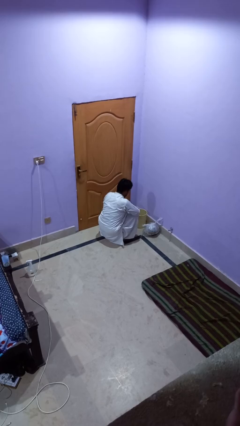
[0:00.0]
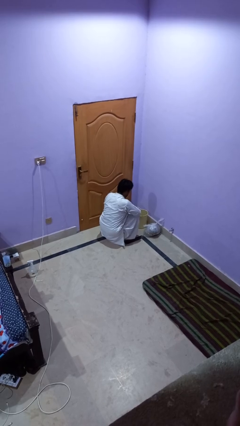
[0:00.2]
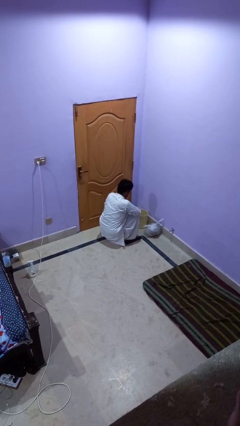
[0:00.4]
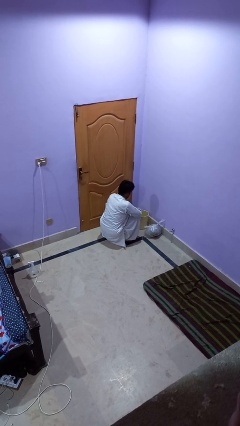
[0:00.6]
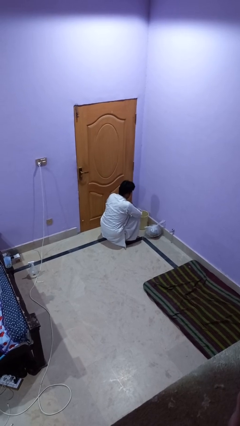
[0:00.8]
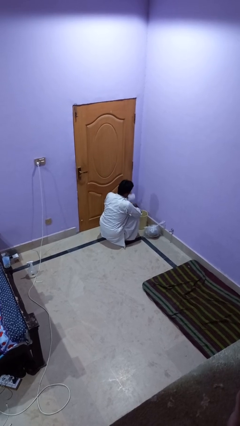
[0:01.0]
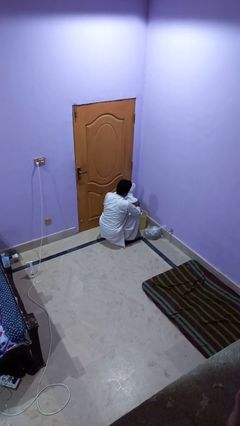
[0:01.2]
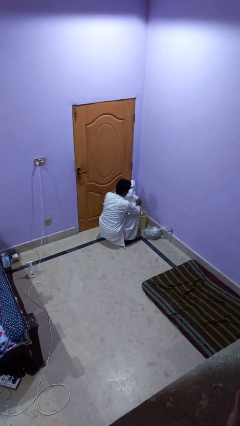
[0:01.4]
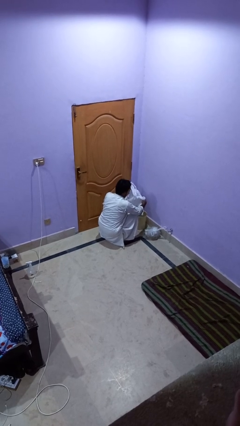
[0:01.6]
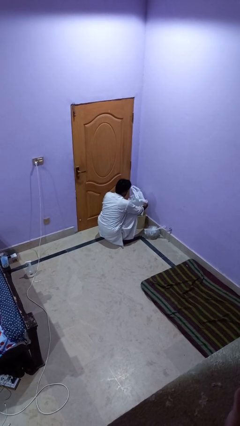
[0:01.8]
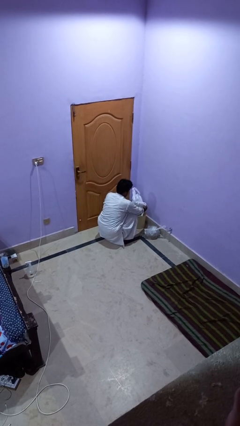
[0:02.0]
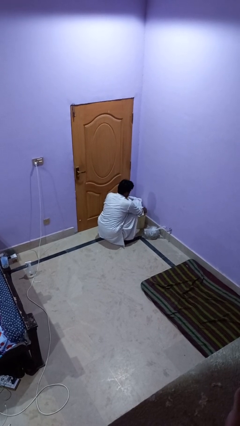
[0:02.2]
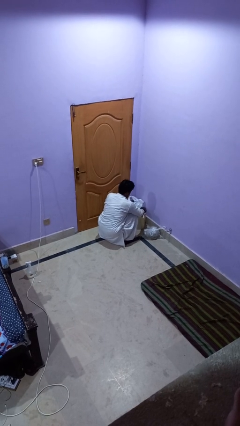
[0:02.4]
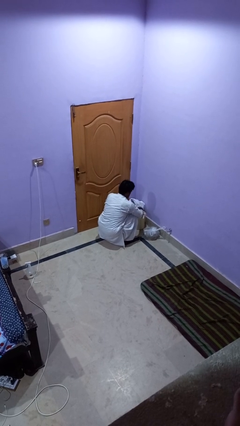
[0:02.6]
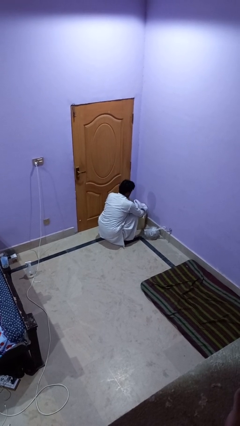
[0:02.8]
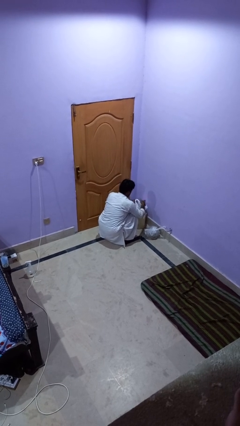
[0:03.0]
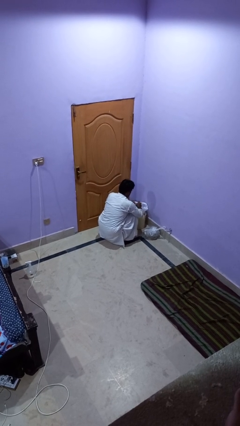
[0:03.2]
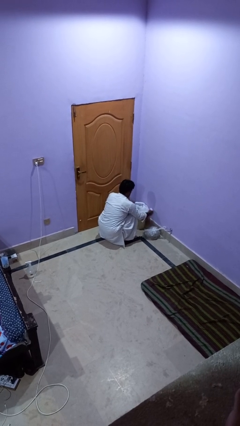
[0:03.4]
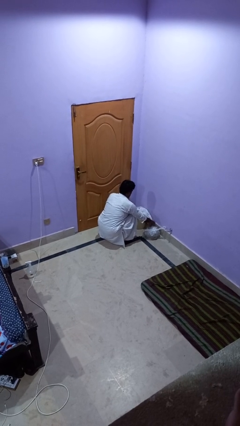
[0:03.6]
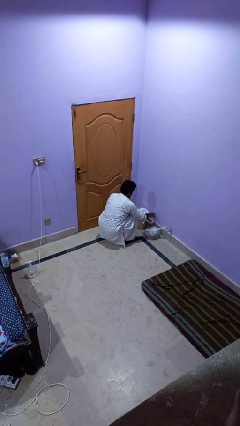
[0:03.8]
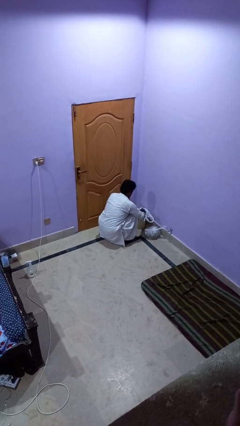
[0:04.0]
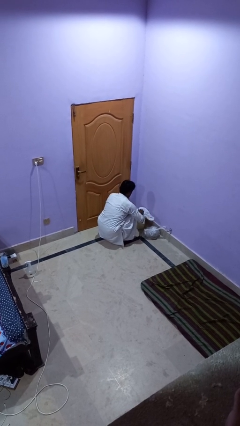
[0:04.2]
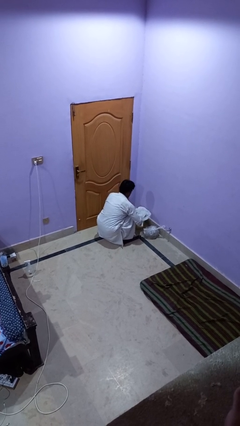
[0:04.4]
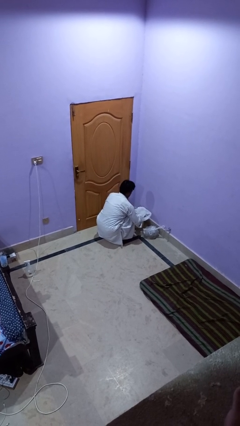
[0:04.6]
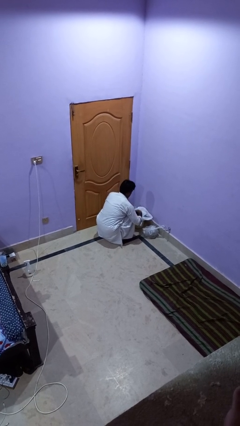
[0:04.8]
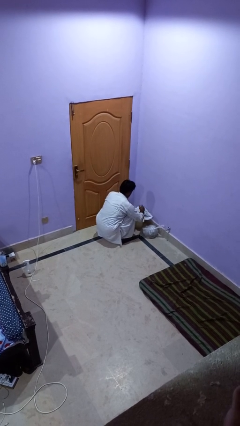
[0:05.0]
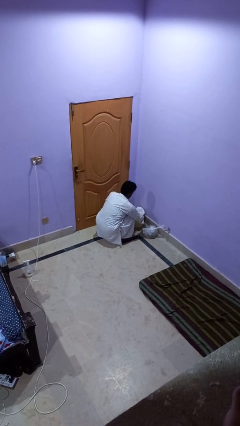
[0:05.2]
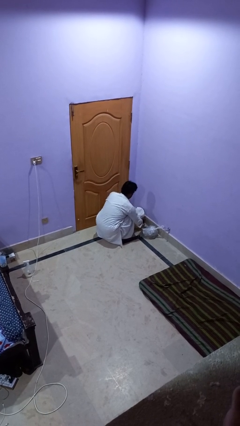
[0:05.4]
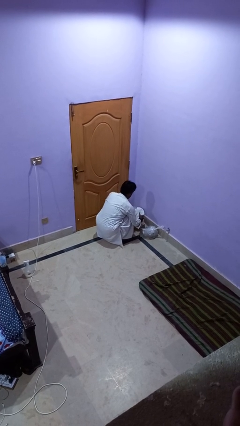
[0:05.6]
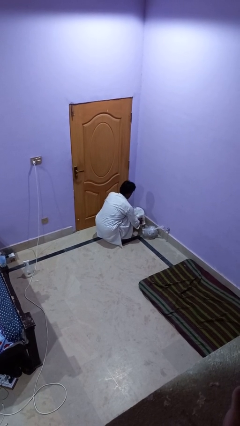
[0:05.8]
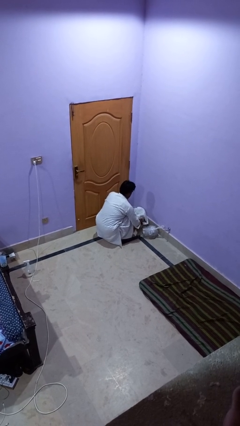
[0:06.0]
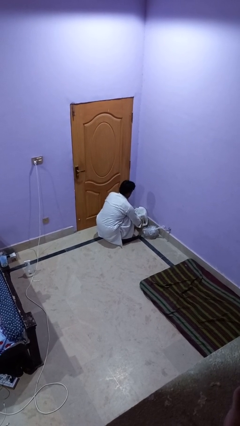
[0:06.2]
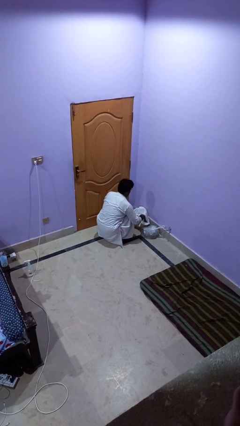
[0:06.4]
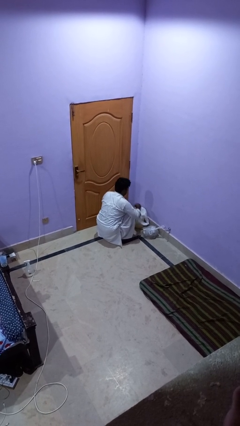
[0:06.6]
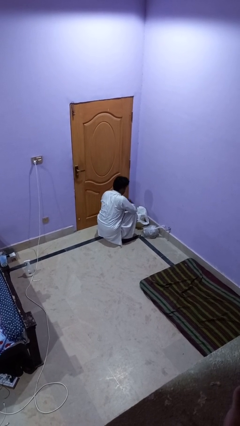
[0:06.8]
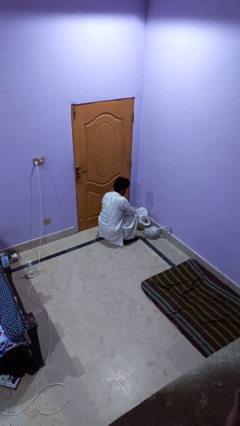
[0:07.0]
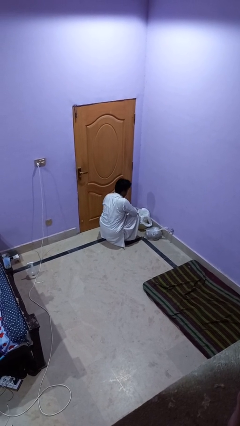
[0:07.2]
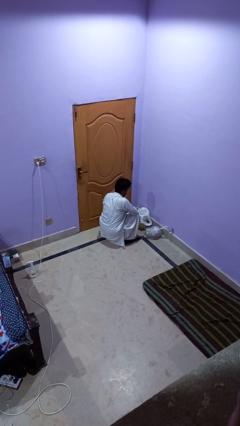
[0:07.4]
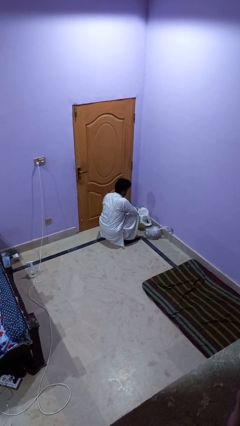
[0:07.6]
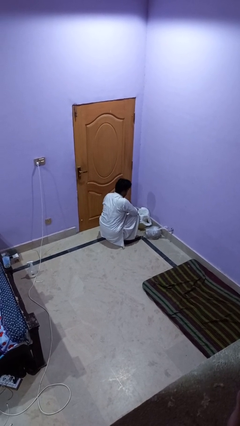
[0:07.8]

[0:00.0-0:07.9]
person inserts trashbag into trashcan

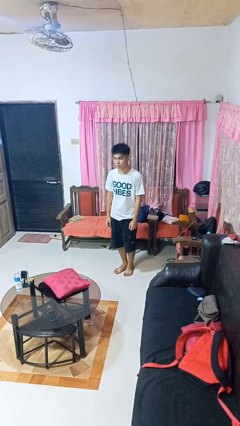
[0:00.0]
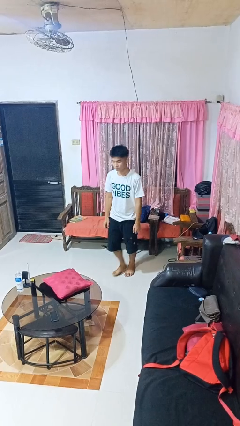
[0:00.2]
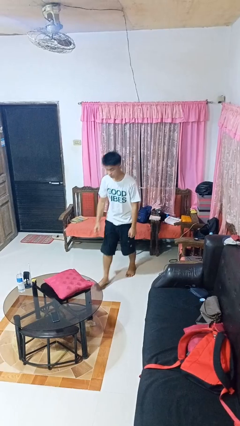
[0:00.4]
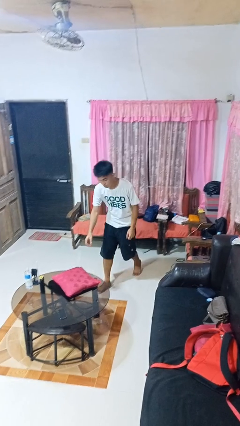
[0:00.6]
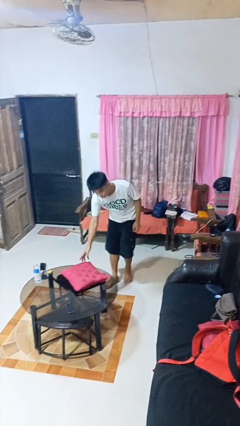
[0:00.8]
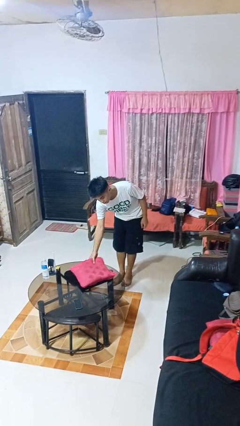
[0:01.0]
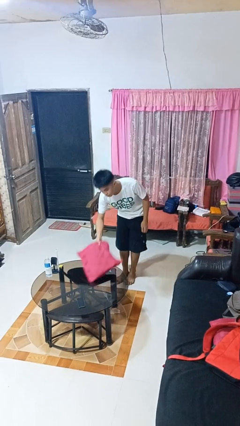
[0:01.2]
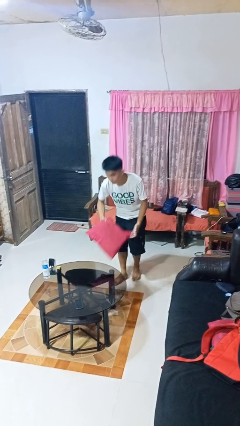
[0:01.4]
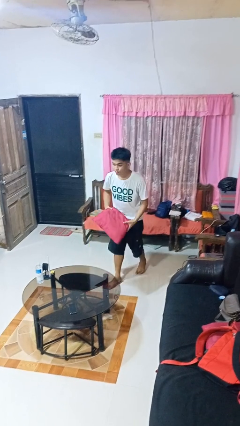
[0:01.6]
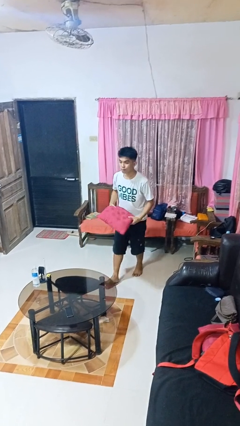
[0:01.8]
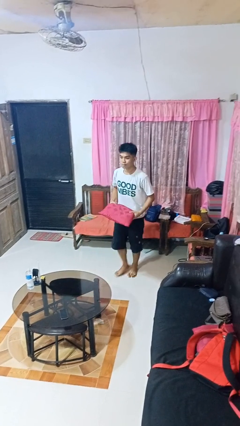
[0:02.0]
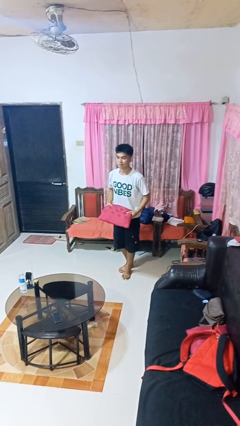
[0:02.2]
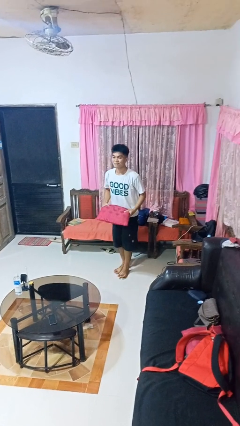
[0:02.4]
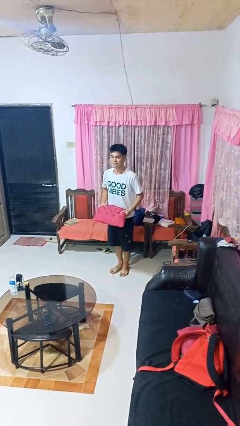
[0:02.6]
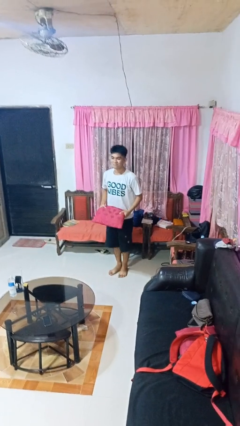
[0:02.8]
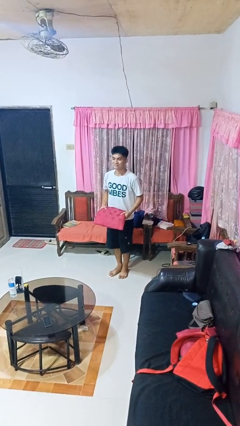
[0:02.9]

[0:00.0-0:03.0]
person picks up object from table

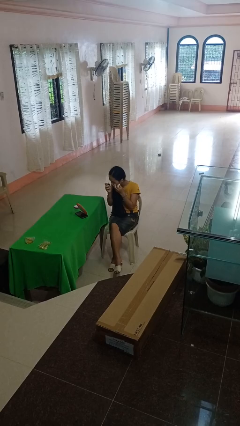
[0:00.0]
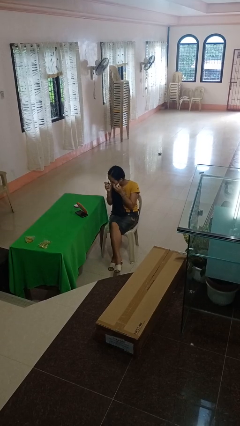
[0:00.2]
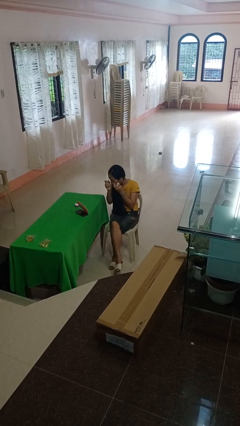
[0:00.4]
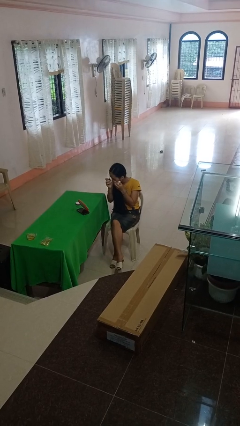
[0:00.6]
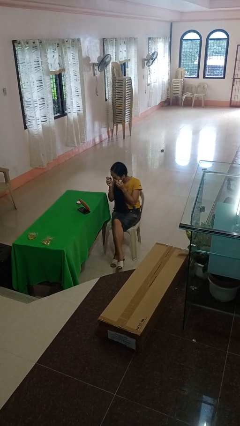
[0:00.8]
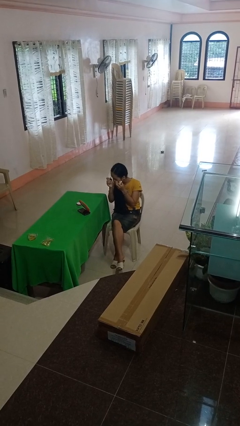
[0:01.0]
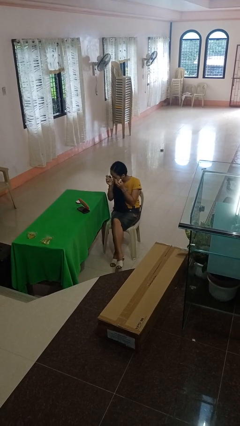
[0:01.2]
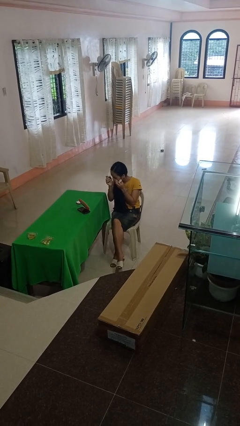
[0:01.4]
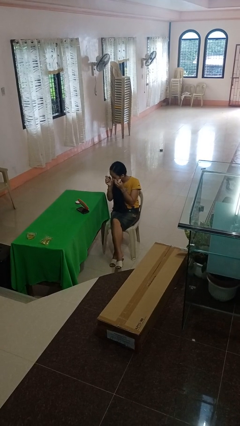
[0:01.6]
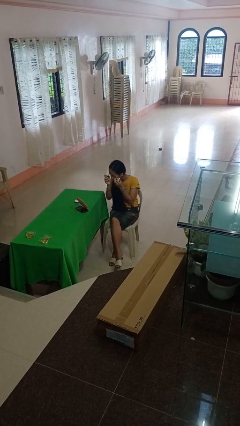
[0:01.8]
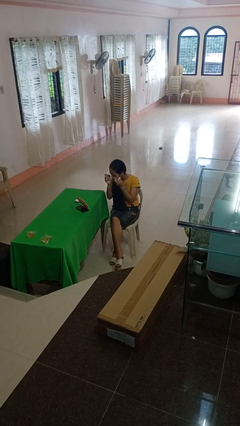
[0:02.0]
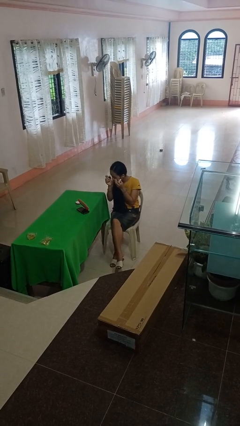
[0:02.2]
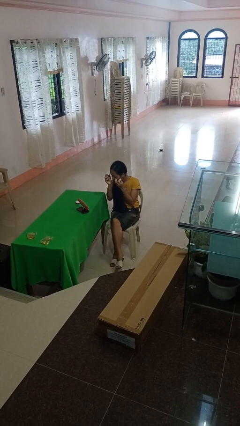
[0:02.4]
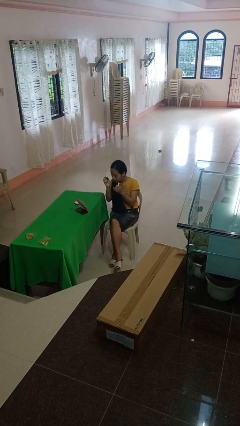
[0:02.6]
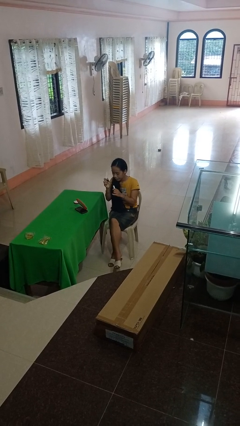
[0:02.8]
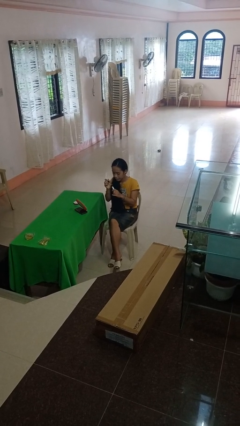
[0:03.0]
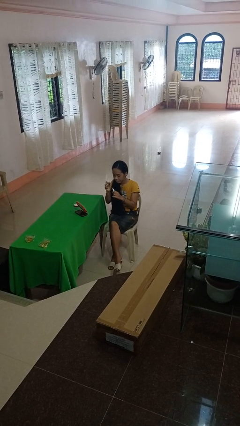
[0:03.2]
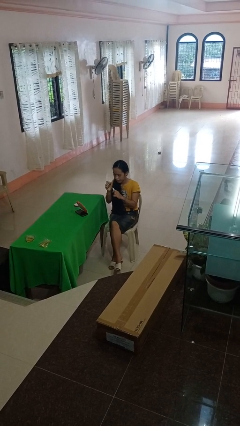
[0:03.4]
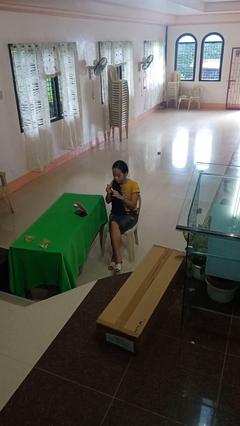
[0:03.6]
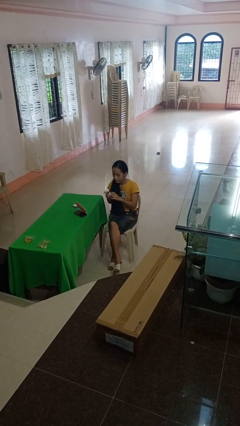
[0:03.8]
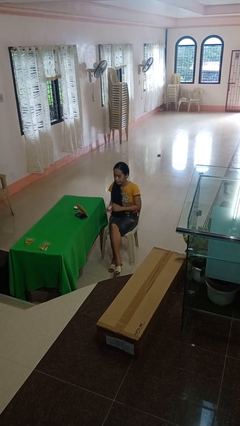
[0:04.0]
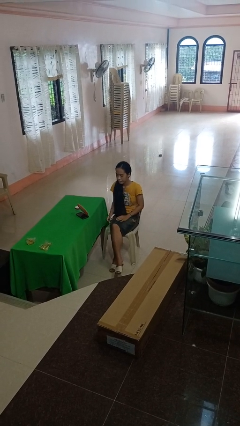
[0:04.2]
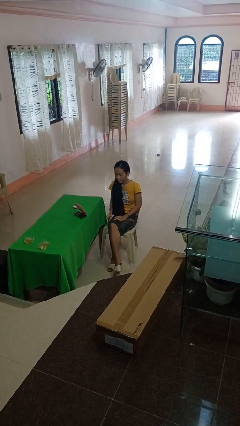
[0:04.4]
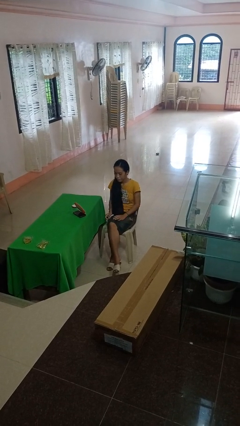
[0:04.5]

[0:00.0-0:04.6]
person applies eye makeup

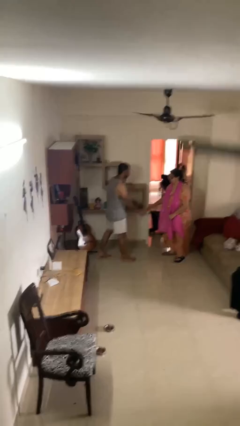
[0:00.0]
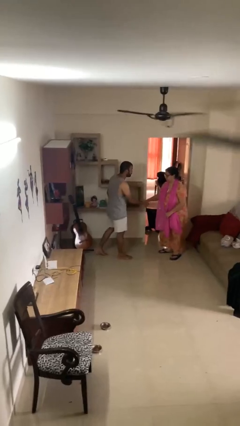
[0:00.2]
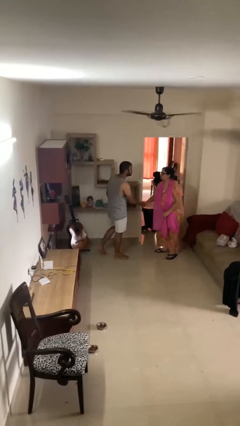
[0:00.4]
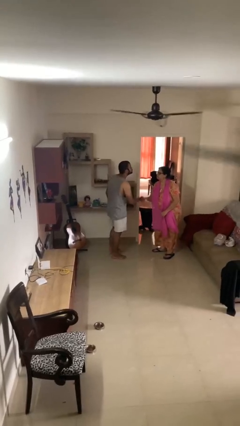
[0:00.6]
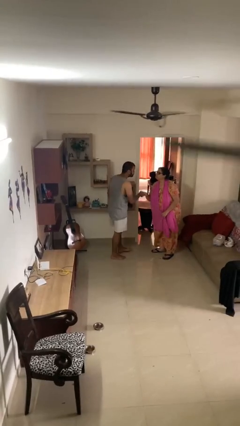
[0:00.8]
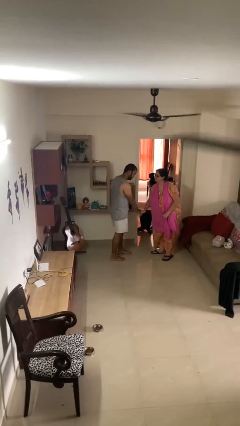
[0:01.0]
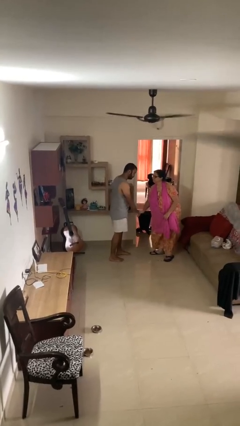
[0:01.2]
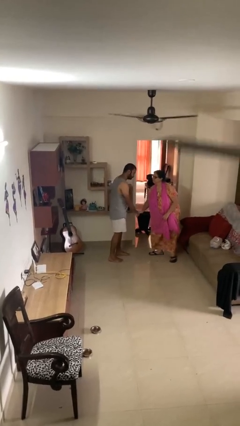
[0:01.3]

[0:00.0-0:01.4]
person shakes hand

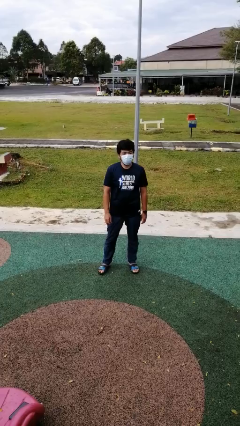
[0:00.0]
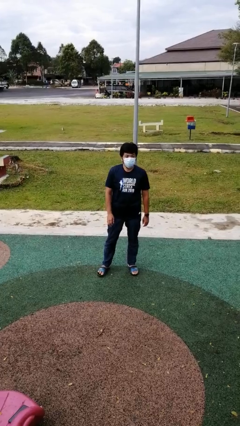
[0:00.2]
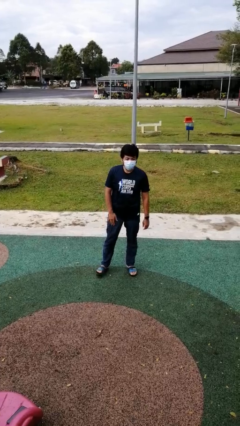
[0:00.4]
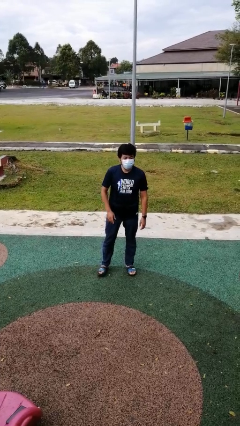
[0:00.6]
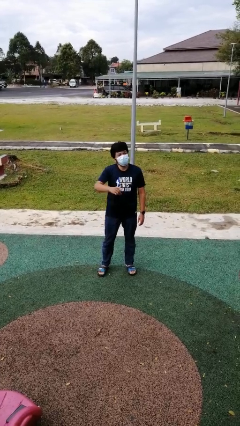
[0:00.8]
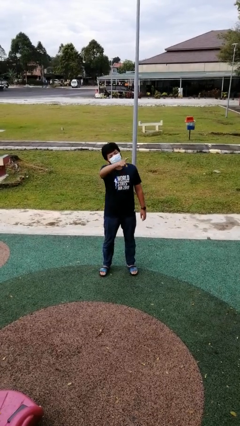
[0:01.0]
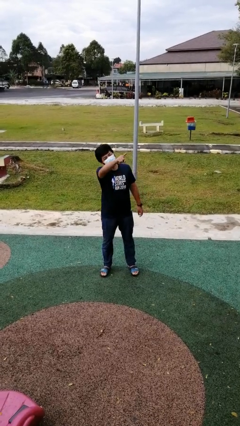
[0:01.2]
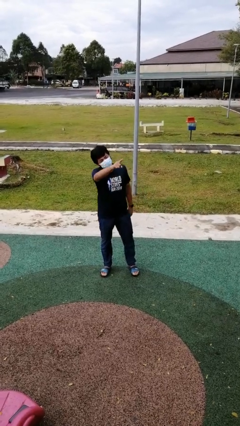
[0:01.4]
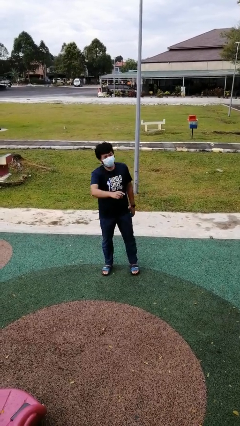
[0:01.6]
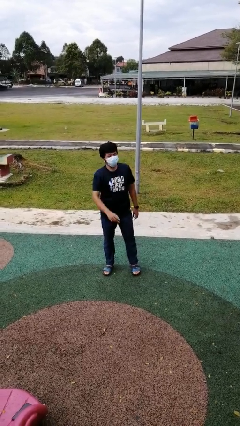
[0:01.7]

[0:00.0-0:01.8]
person points at person
